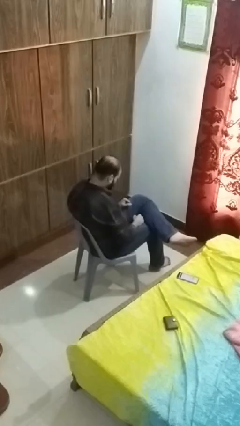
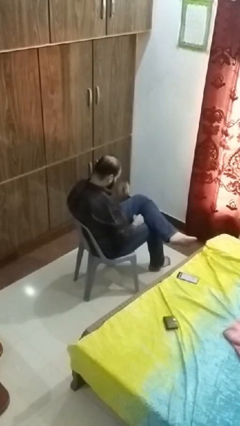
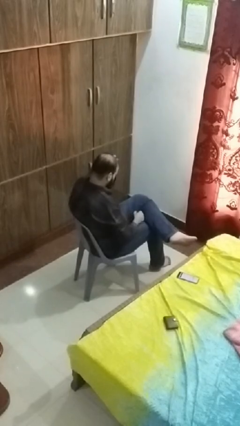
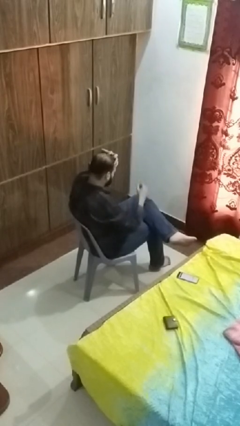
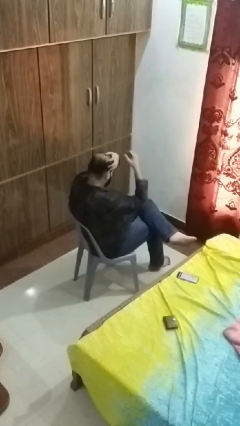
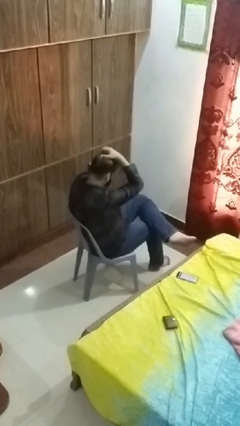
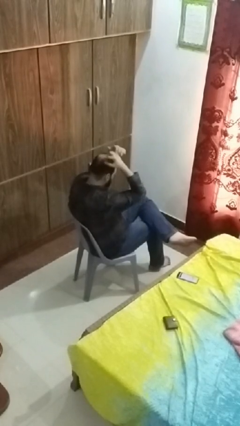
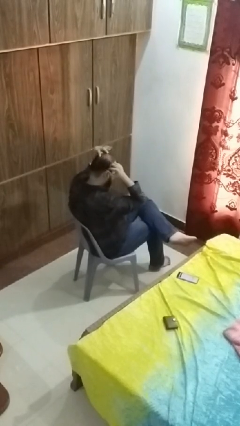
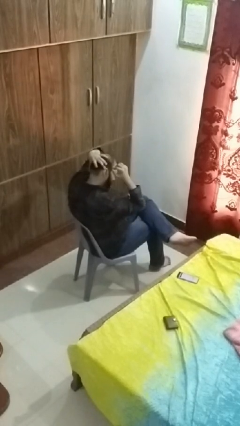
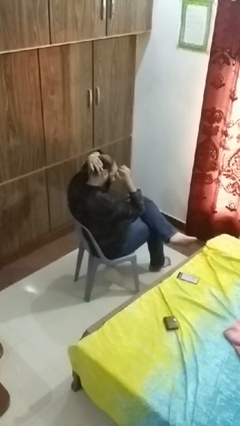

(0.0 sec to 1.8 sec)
person strokes hair

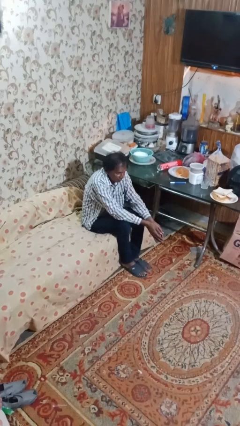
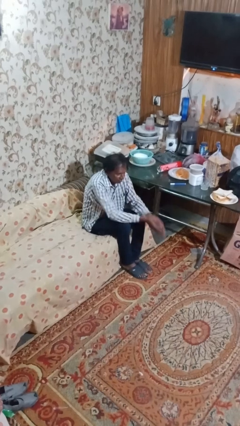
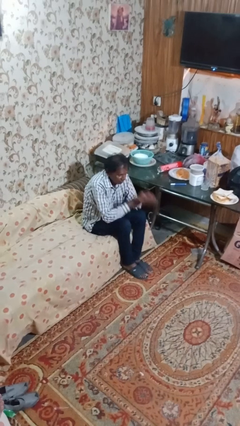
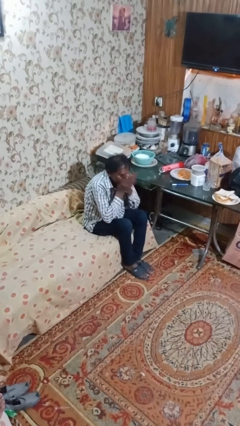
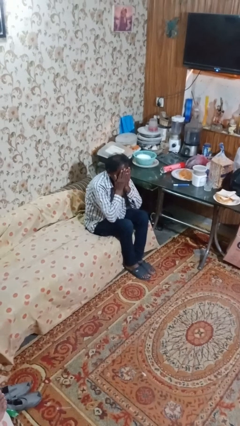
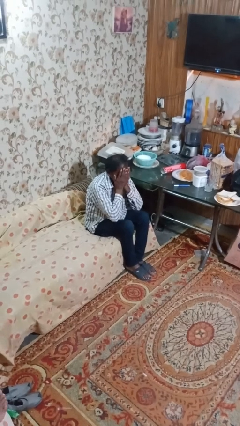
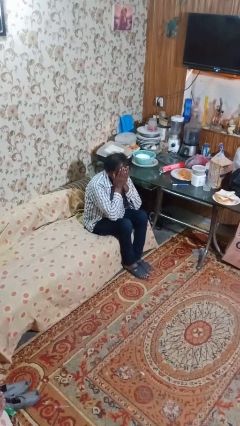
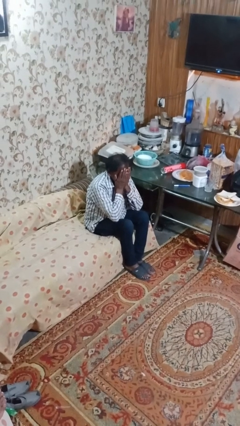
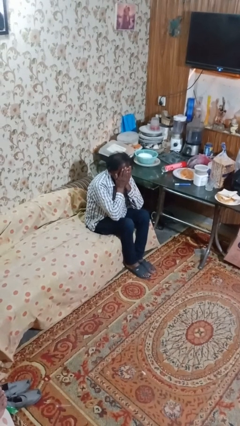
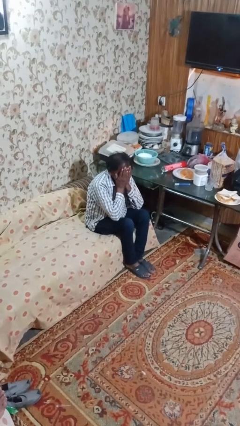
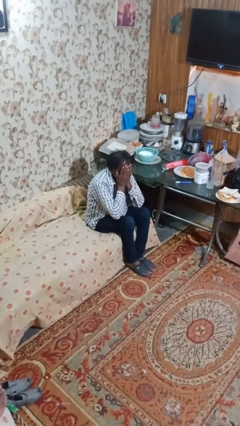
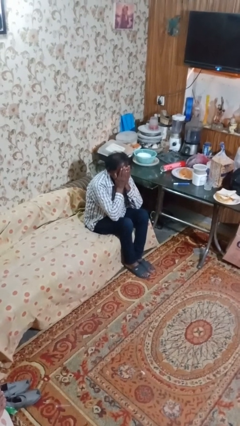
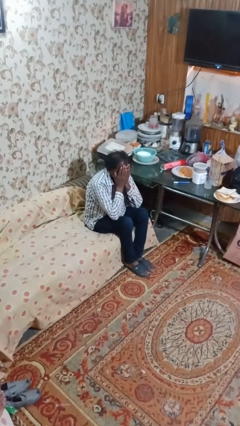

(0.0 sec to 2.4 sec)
person covers face with hands

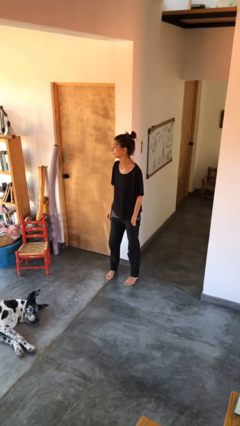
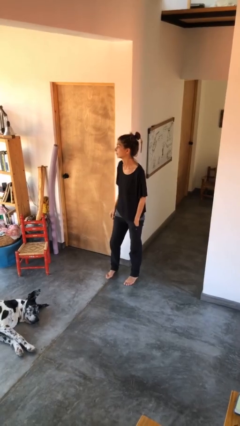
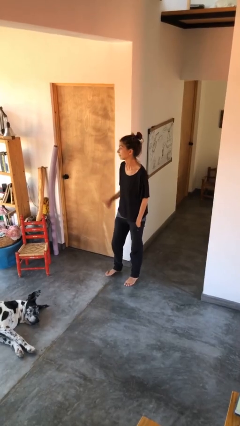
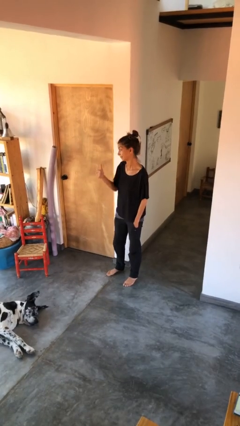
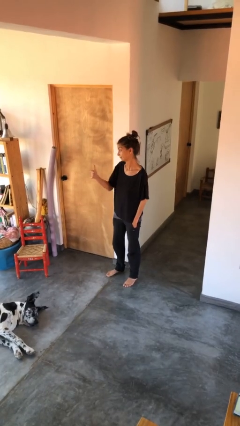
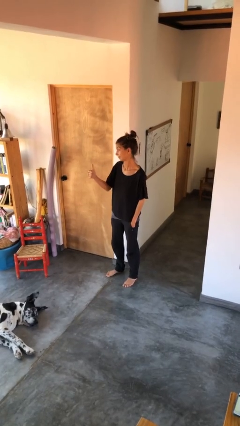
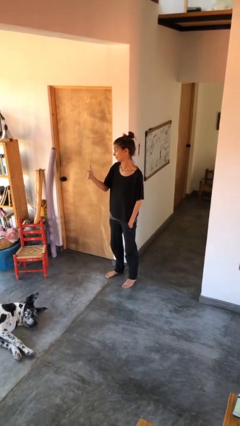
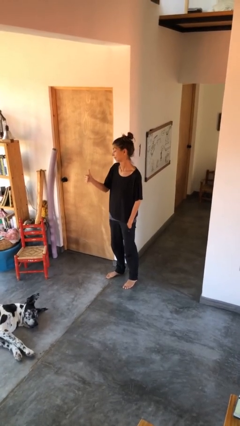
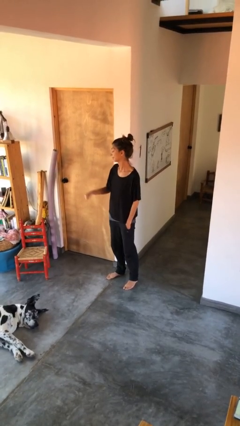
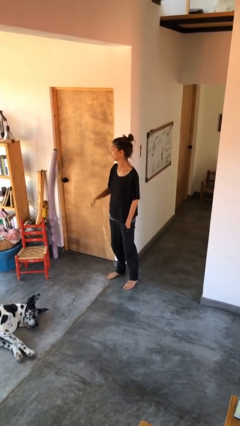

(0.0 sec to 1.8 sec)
person gestures thumbs up

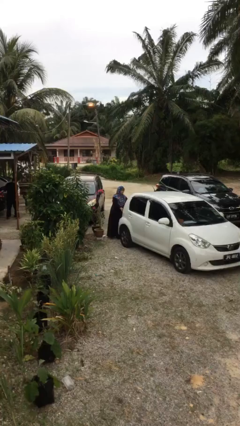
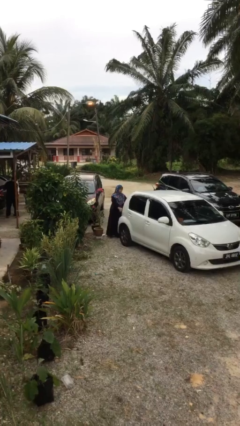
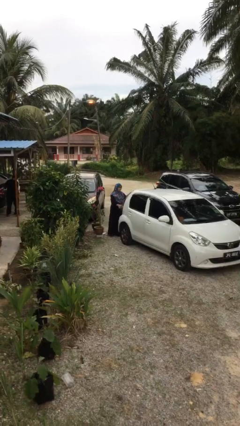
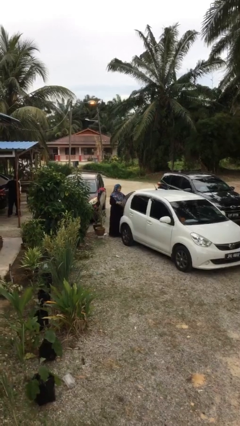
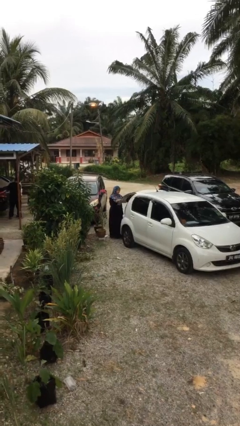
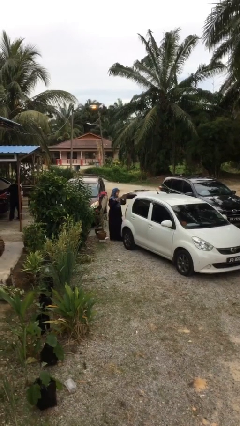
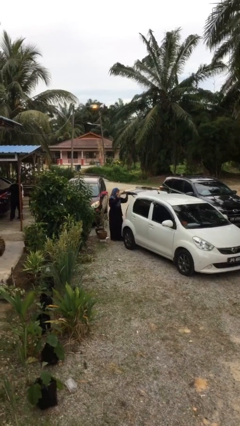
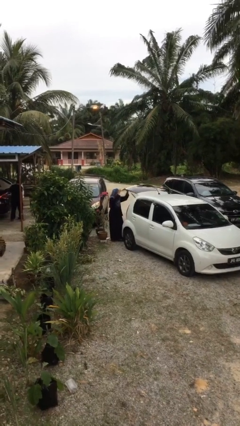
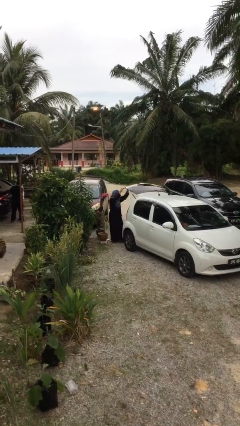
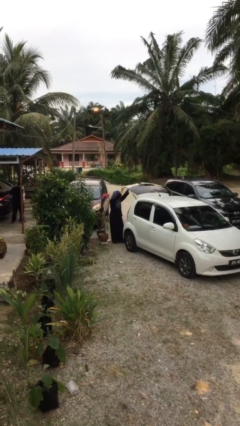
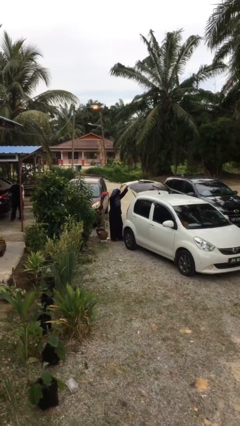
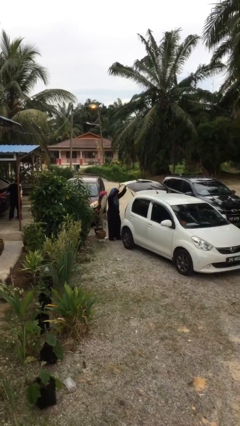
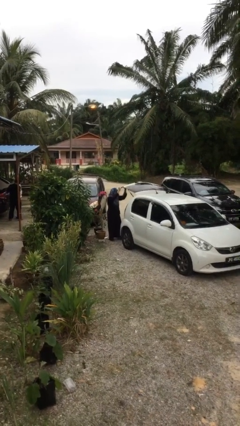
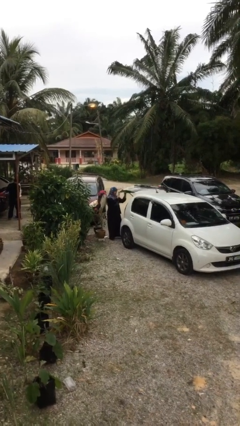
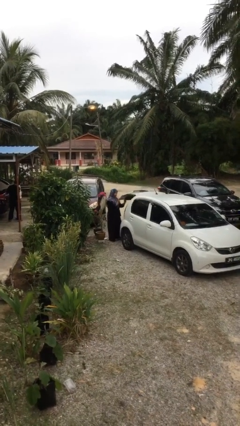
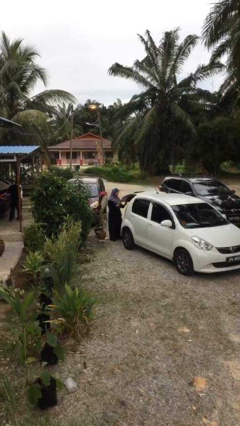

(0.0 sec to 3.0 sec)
person opens car trunk

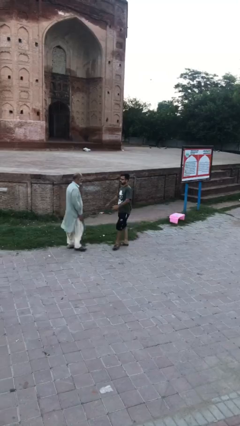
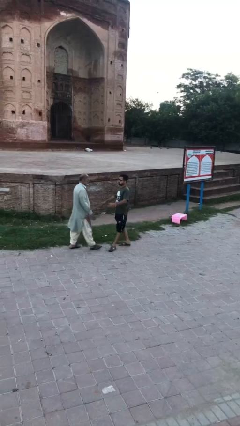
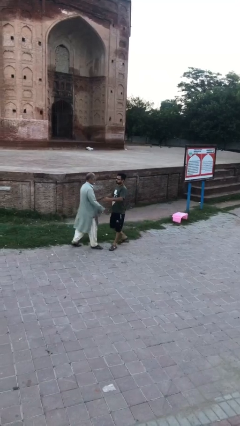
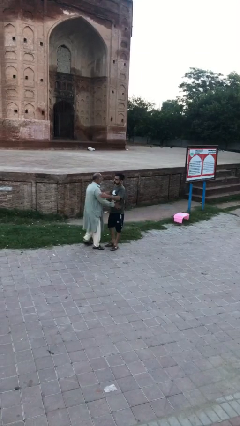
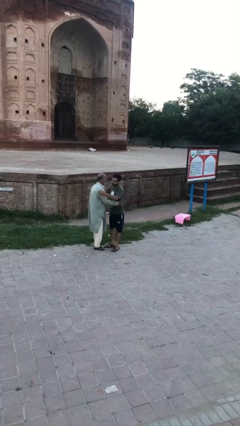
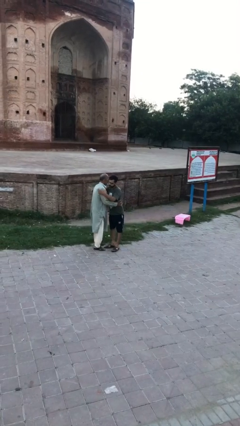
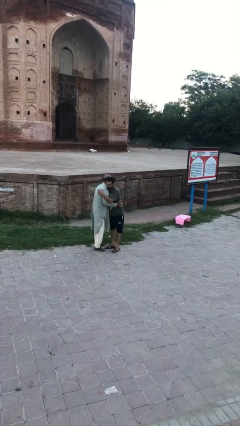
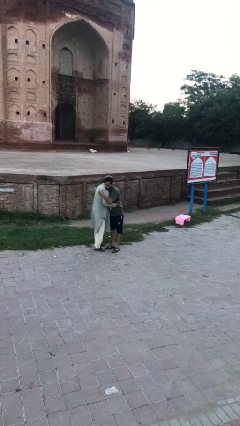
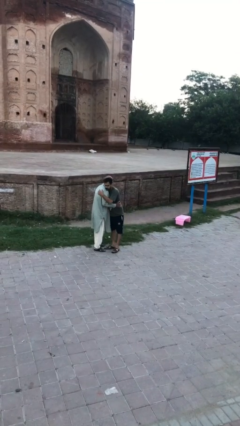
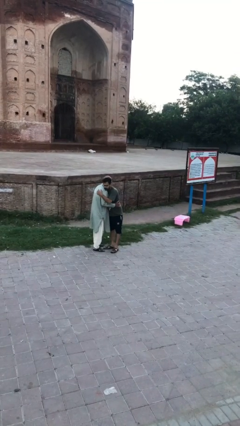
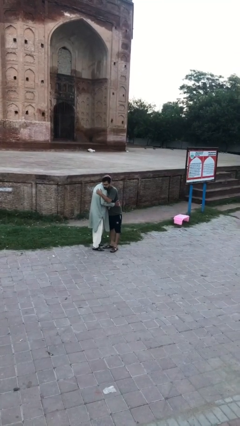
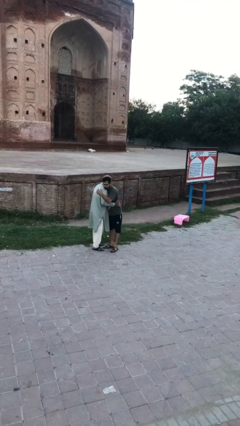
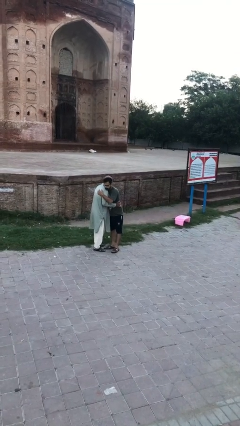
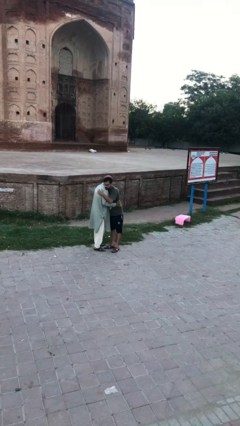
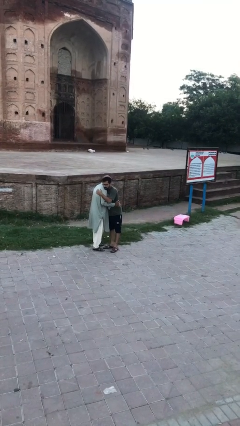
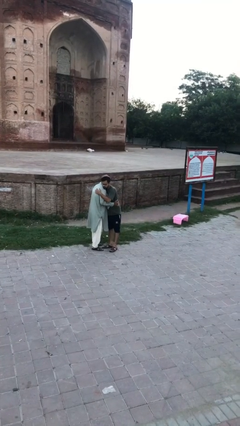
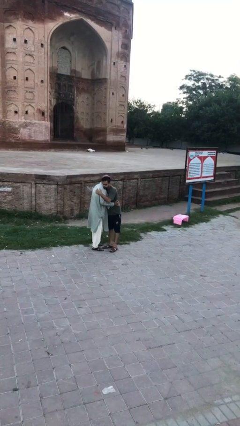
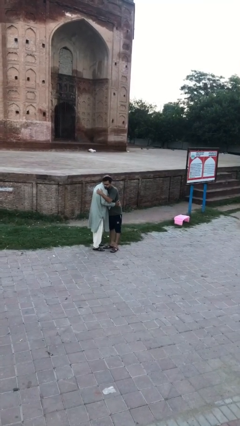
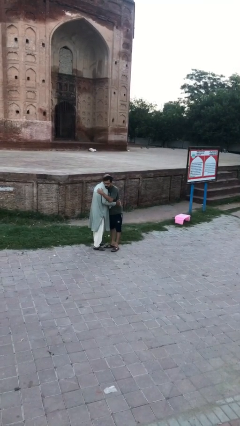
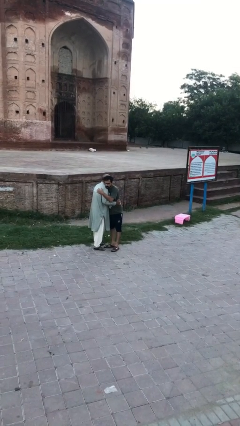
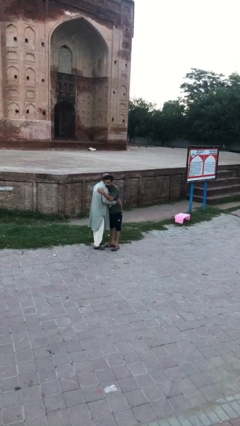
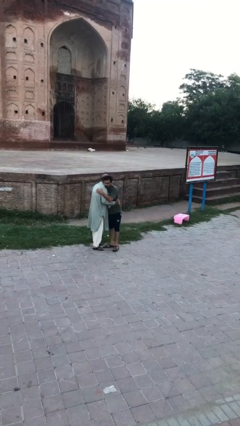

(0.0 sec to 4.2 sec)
person embraces person

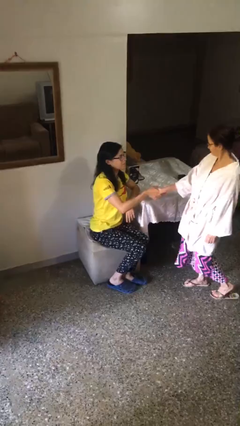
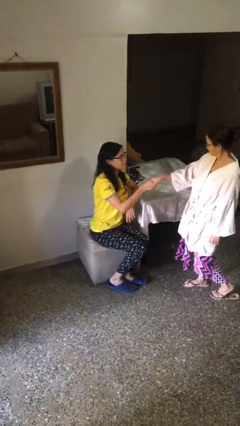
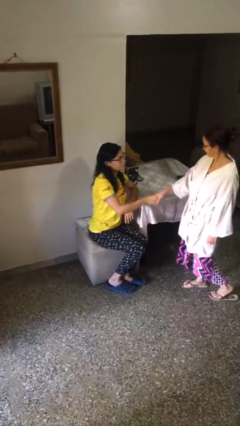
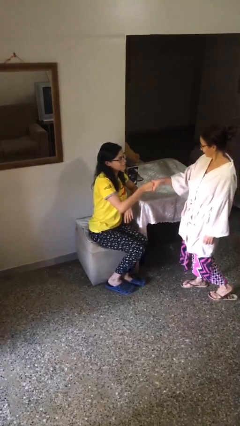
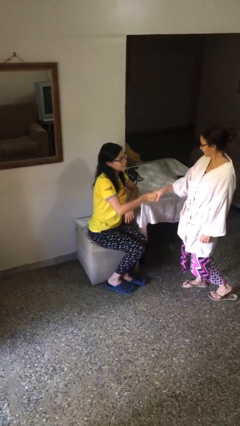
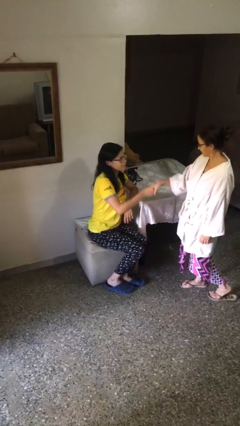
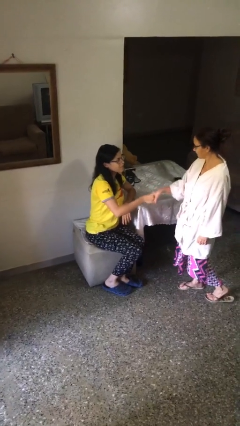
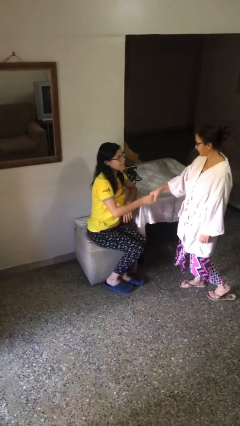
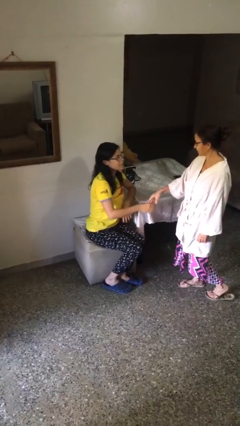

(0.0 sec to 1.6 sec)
person shakes hand

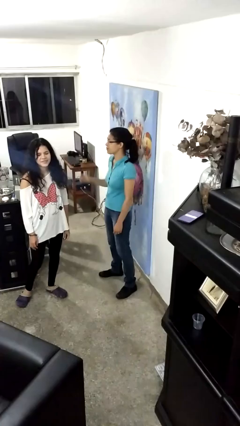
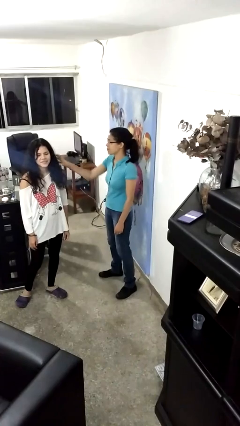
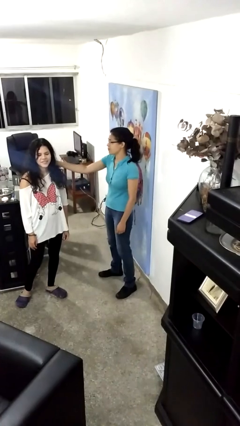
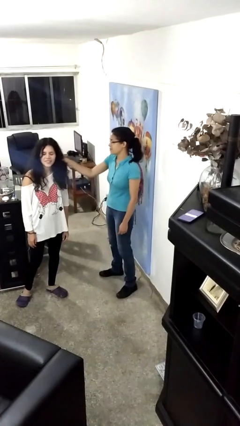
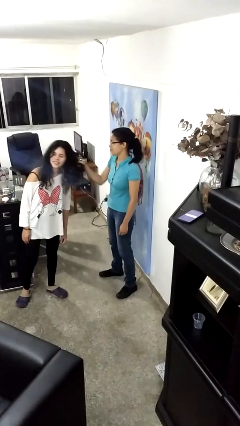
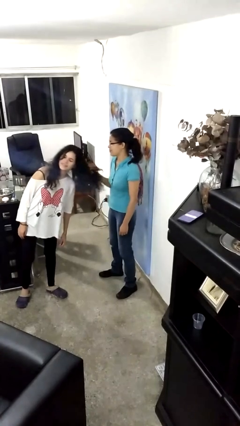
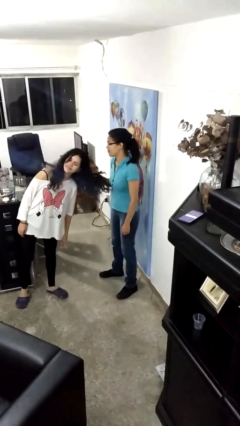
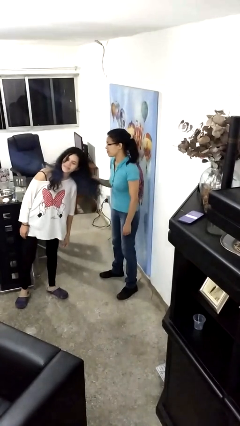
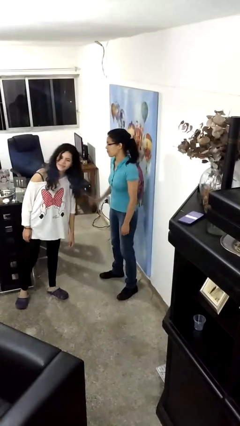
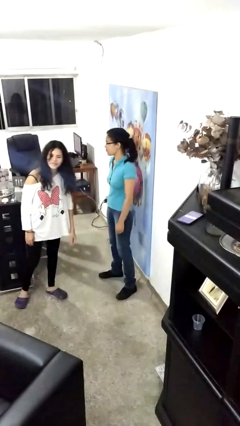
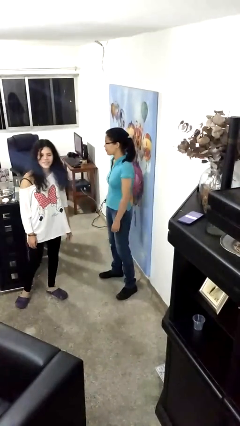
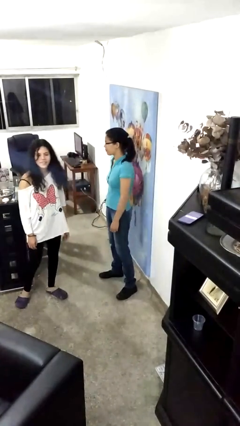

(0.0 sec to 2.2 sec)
person grabs person by hair
